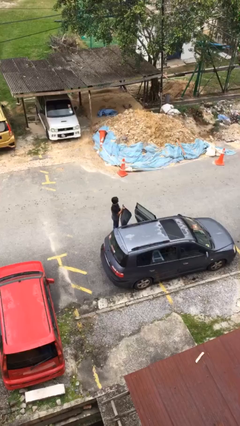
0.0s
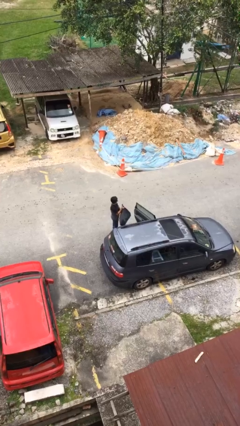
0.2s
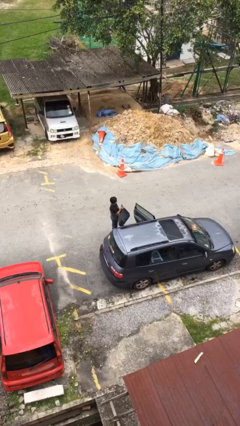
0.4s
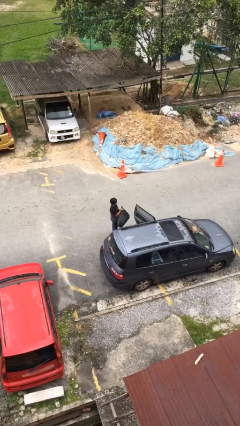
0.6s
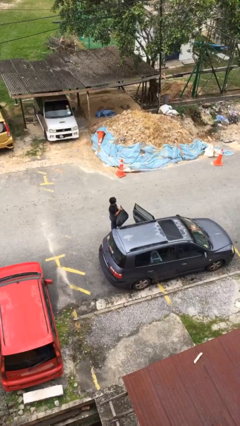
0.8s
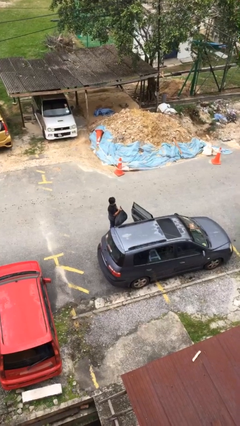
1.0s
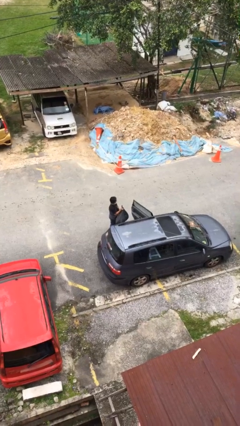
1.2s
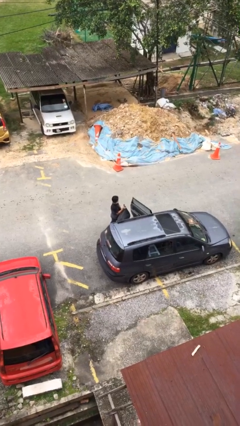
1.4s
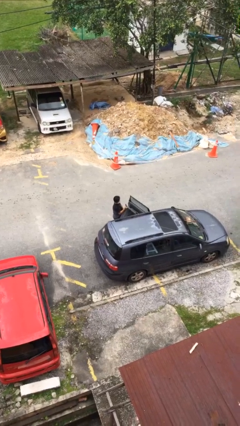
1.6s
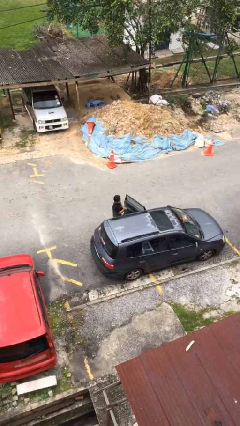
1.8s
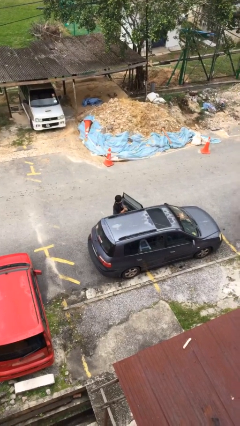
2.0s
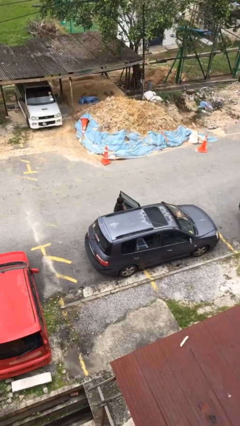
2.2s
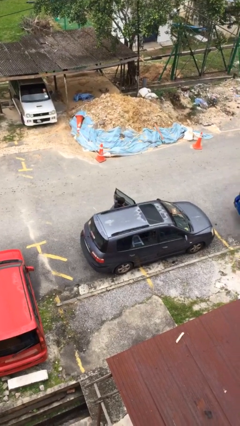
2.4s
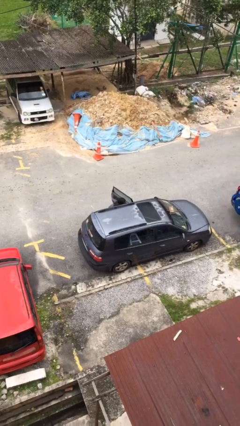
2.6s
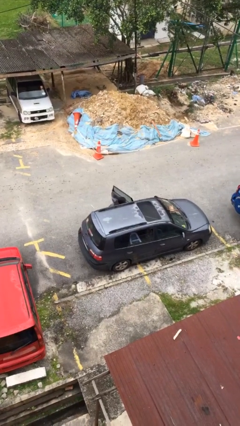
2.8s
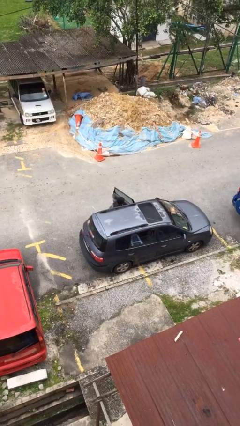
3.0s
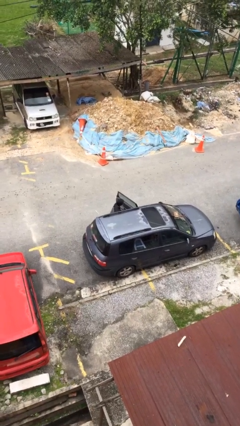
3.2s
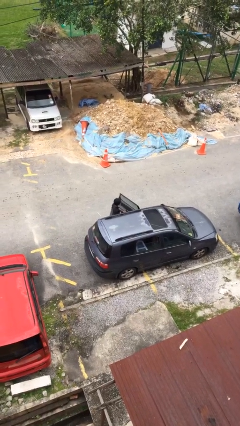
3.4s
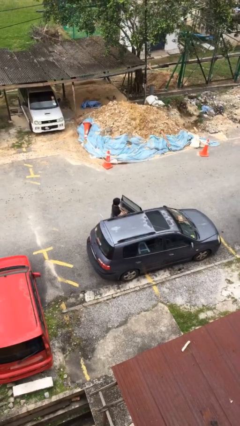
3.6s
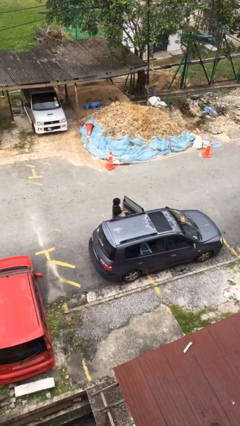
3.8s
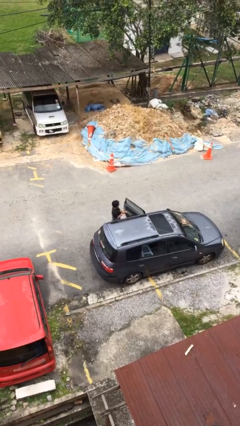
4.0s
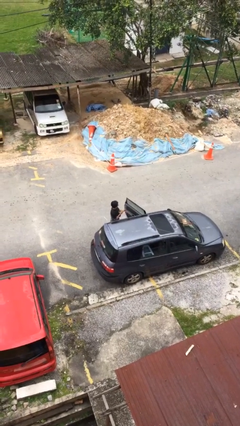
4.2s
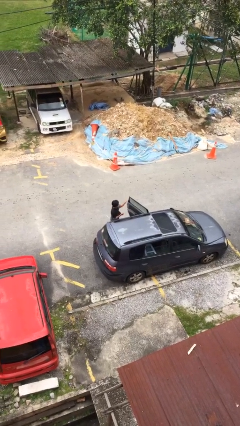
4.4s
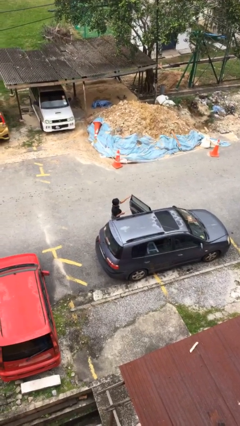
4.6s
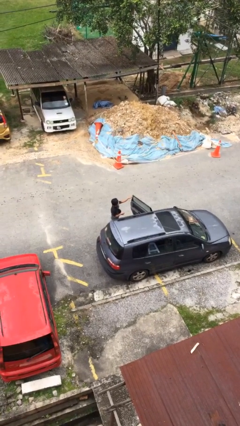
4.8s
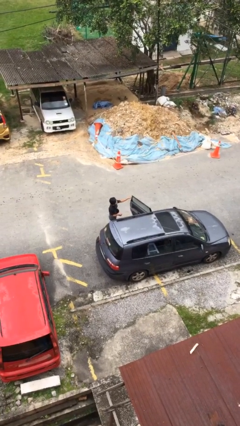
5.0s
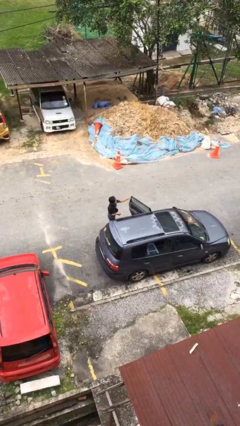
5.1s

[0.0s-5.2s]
person loads car

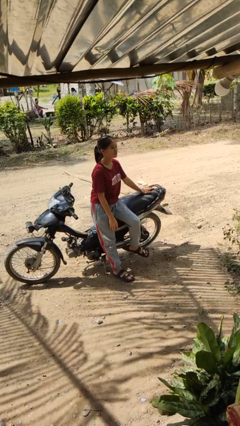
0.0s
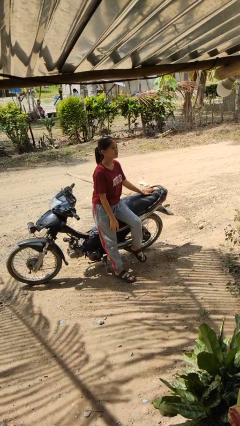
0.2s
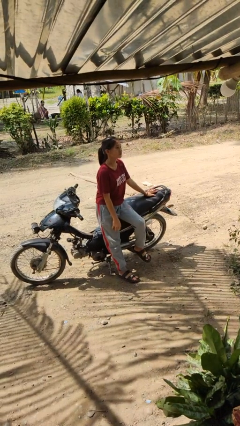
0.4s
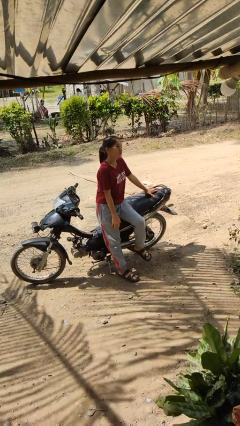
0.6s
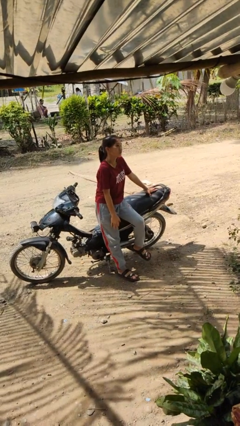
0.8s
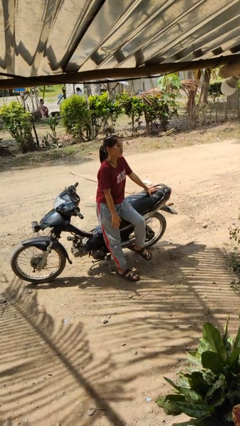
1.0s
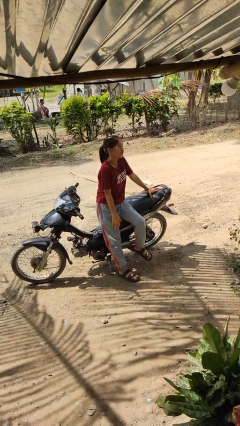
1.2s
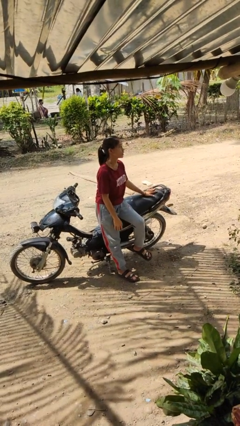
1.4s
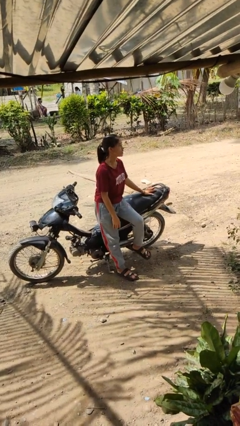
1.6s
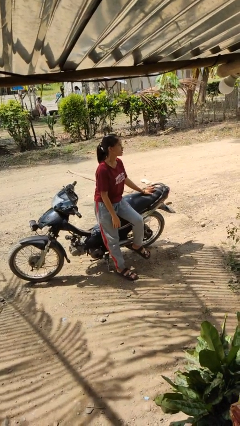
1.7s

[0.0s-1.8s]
person shrugs

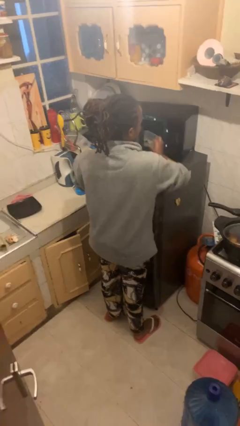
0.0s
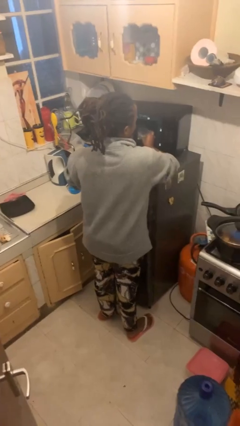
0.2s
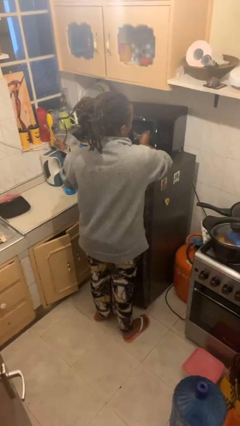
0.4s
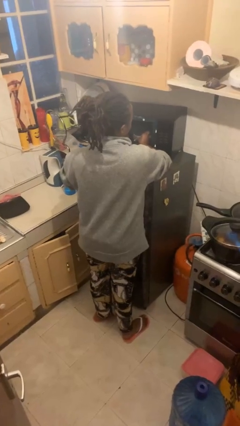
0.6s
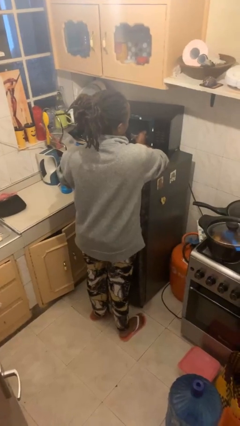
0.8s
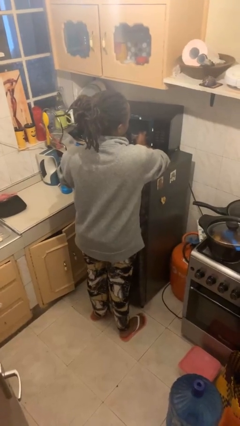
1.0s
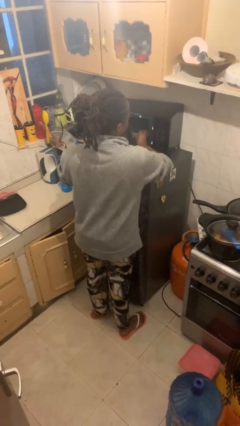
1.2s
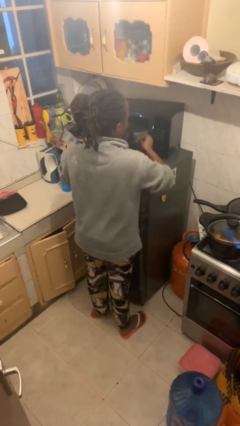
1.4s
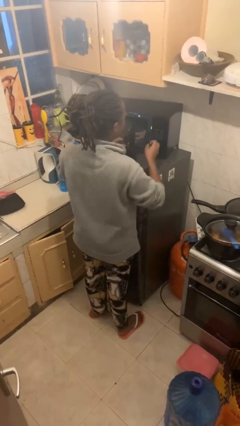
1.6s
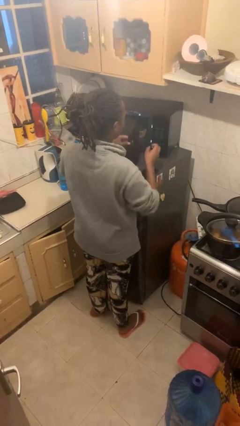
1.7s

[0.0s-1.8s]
person puts object into microwave

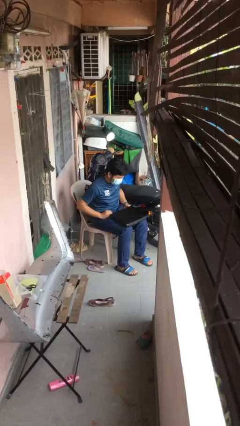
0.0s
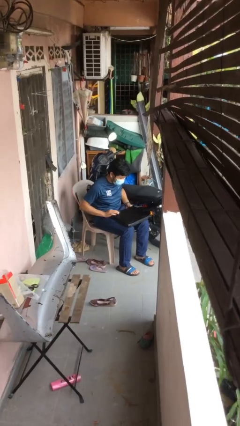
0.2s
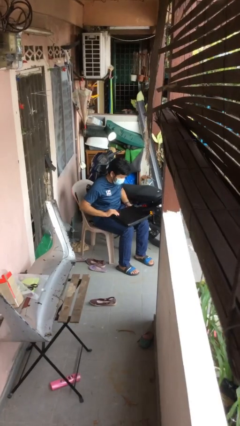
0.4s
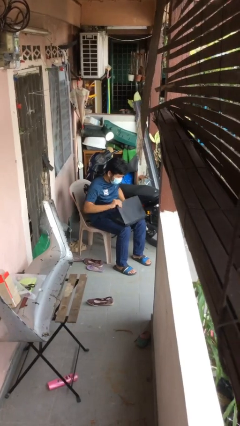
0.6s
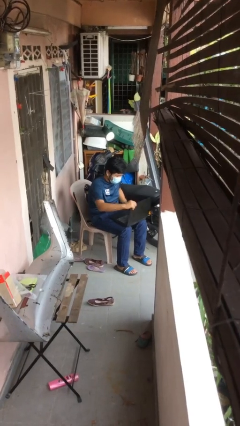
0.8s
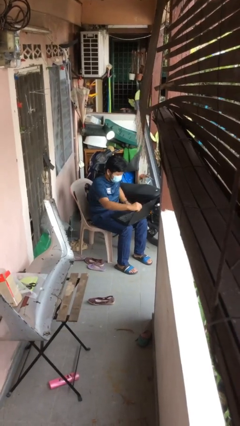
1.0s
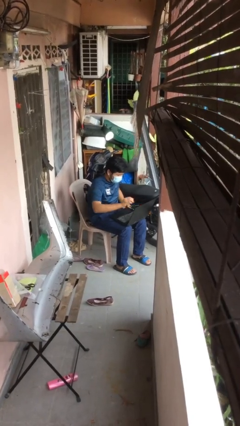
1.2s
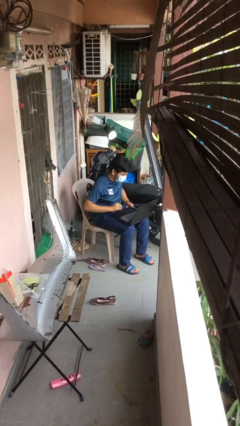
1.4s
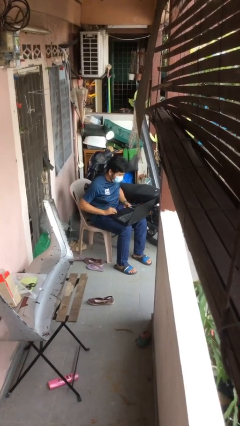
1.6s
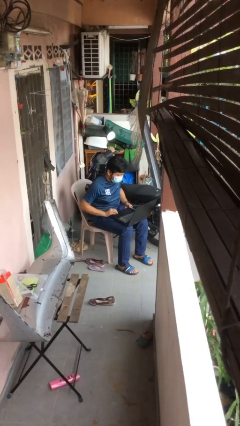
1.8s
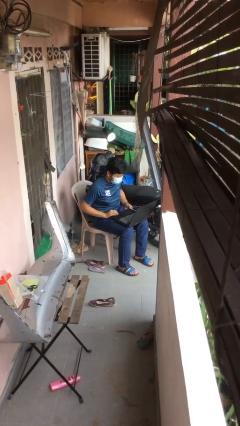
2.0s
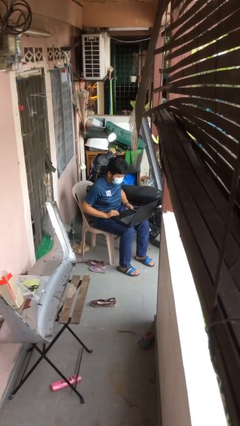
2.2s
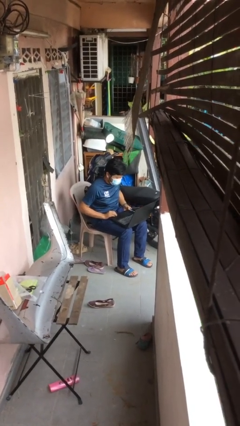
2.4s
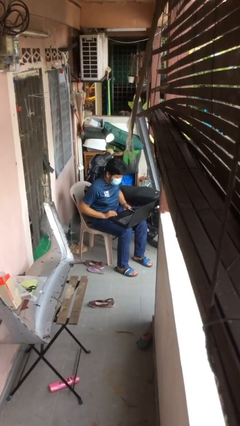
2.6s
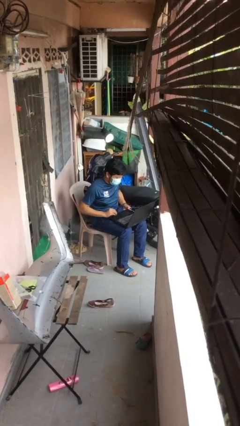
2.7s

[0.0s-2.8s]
person opens laptop

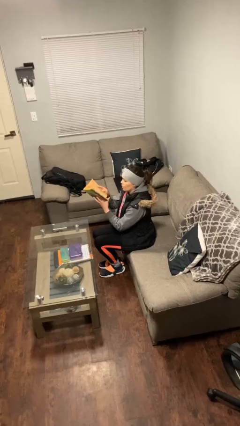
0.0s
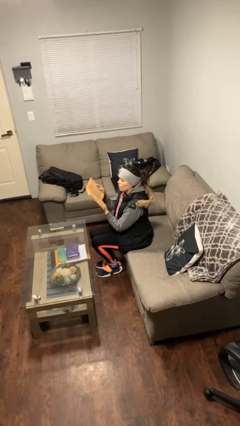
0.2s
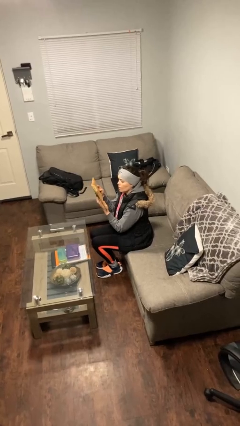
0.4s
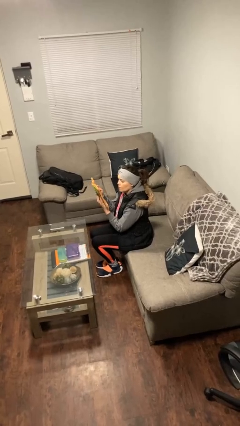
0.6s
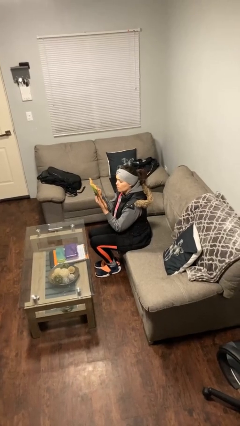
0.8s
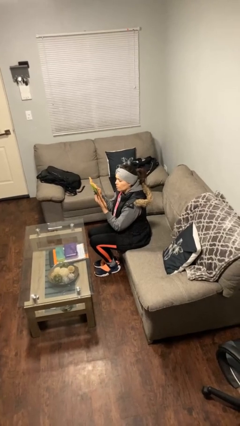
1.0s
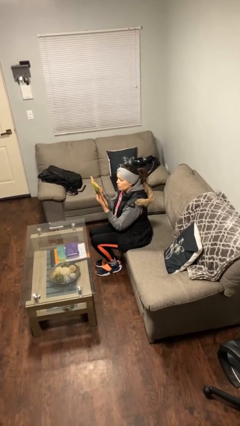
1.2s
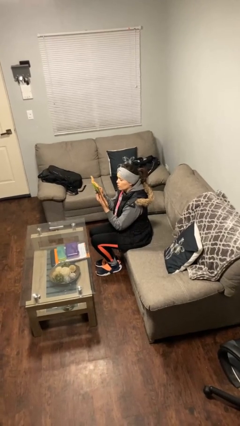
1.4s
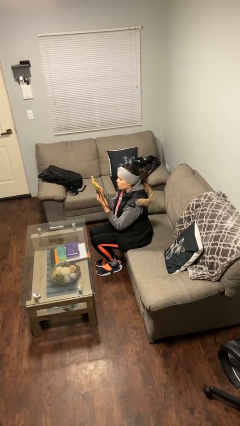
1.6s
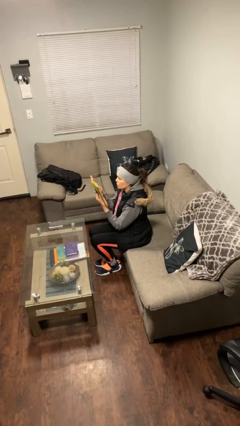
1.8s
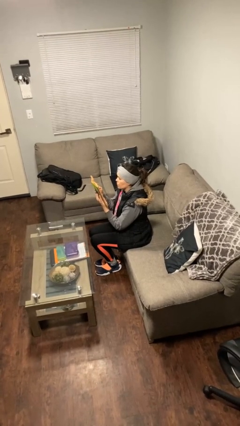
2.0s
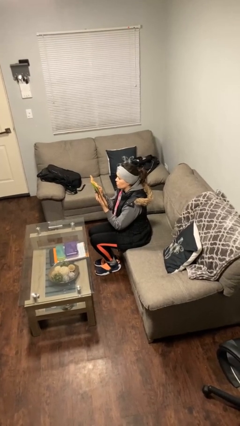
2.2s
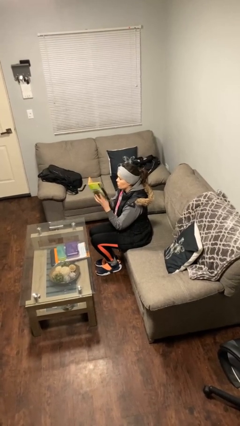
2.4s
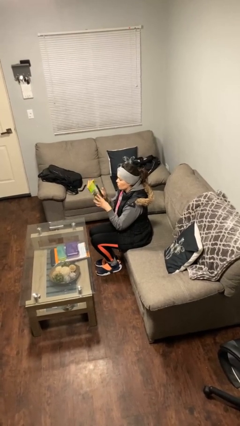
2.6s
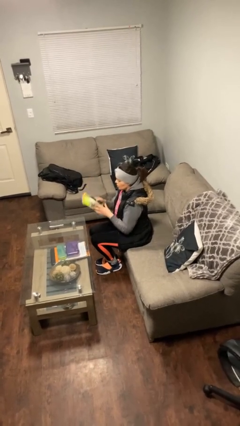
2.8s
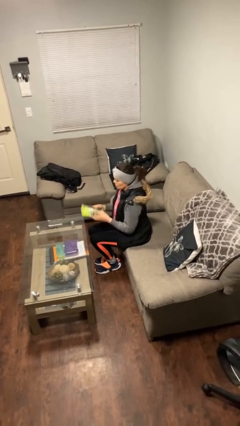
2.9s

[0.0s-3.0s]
person reads document

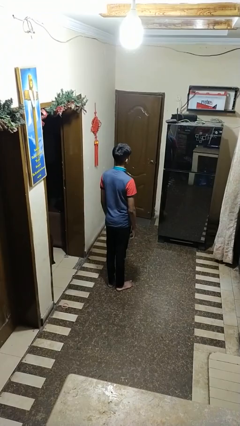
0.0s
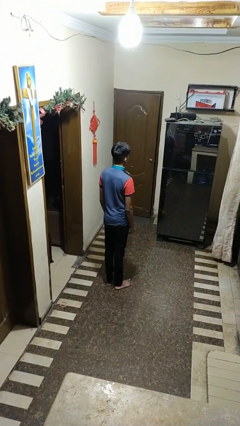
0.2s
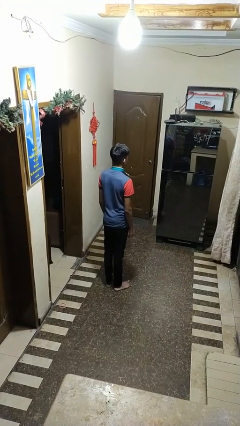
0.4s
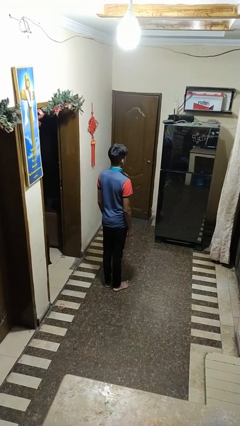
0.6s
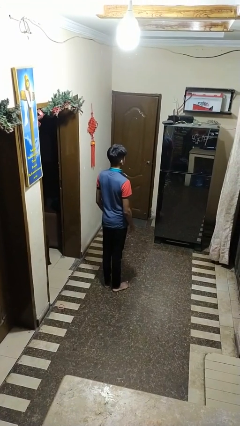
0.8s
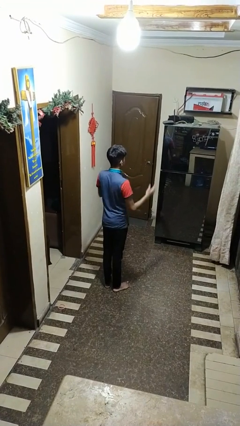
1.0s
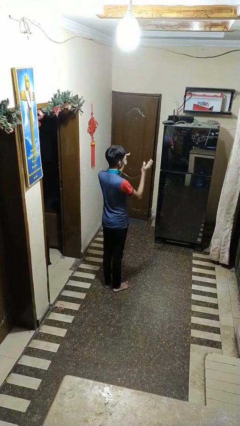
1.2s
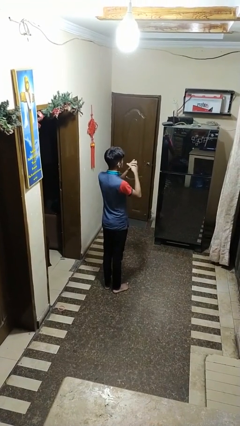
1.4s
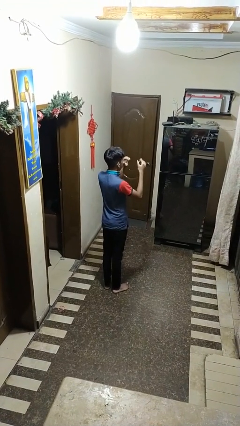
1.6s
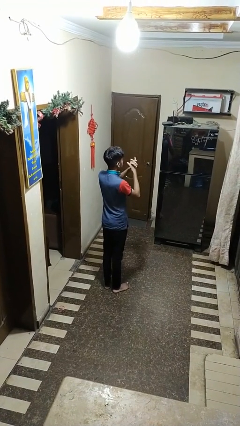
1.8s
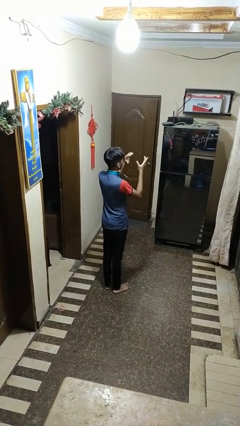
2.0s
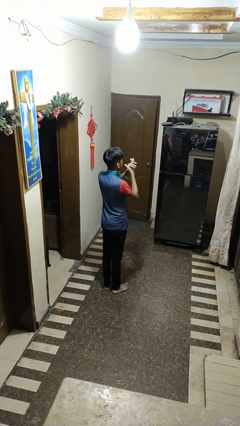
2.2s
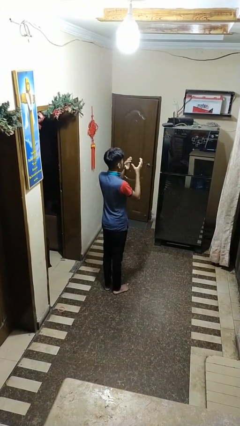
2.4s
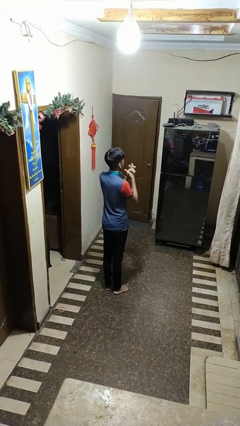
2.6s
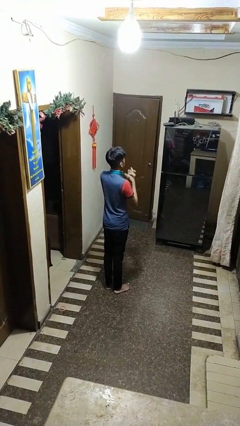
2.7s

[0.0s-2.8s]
person claps hands

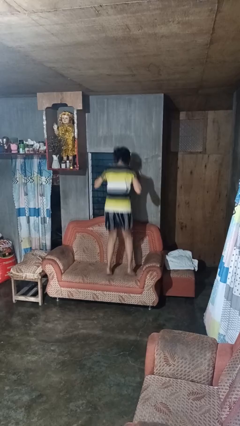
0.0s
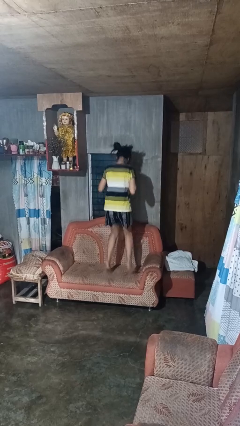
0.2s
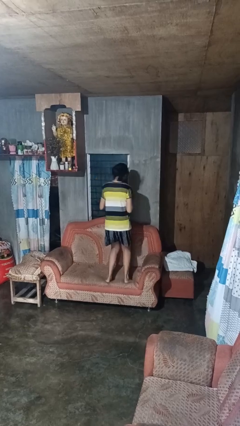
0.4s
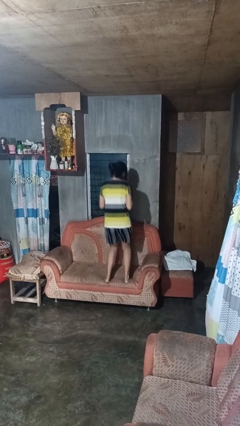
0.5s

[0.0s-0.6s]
person jumps on couch
